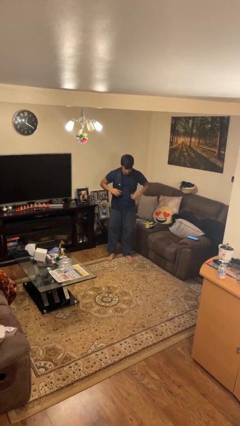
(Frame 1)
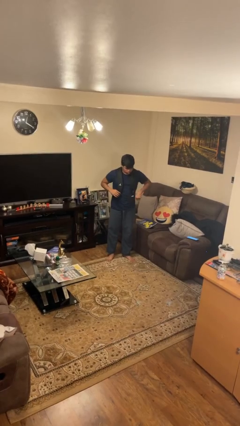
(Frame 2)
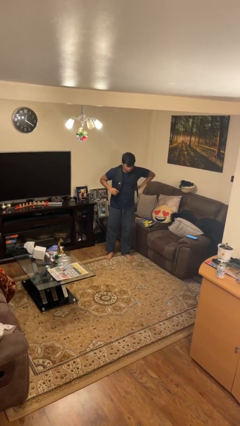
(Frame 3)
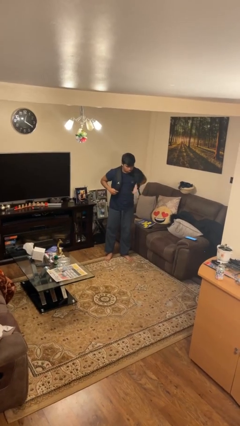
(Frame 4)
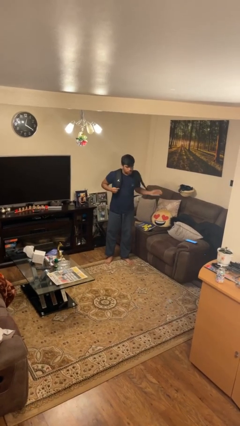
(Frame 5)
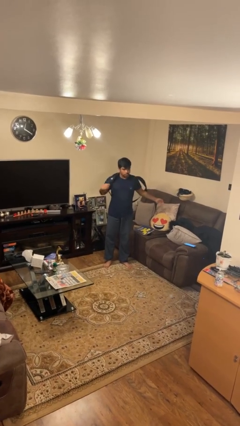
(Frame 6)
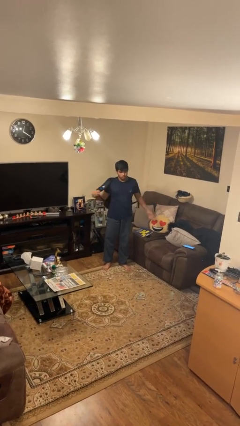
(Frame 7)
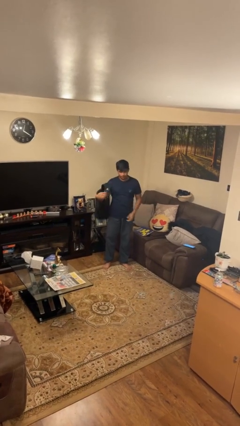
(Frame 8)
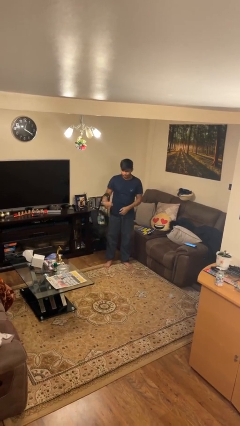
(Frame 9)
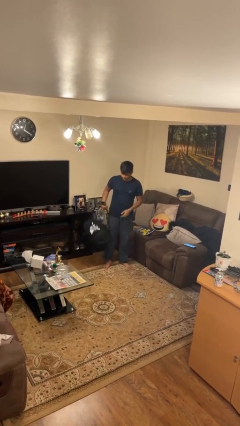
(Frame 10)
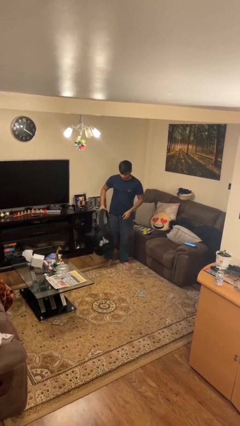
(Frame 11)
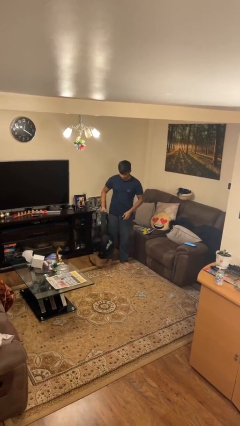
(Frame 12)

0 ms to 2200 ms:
person takes off backpack

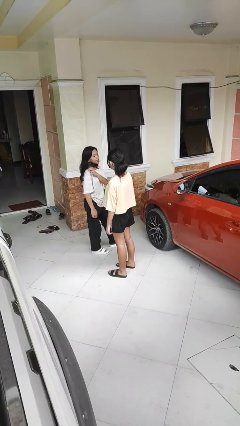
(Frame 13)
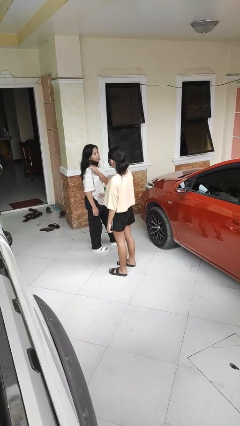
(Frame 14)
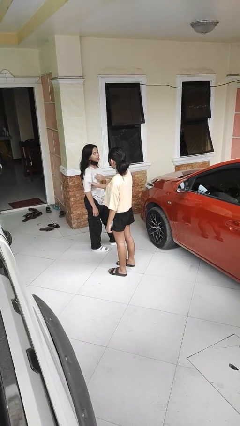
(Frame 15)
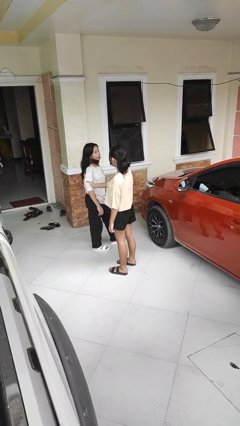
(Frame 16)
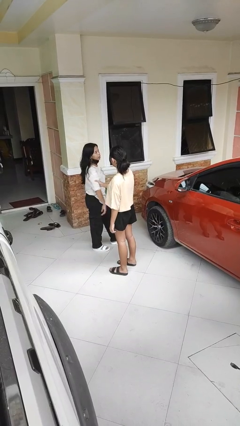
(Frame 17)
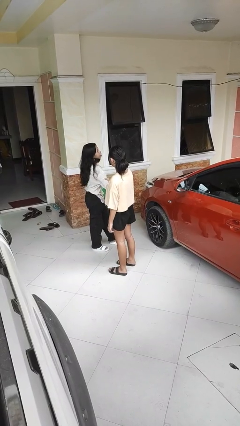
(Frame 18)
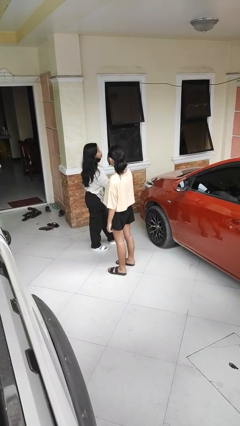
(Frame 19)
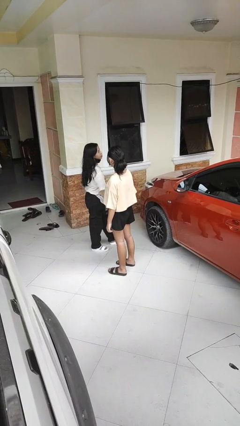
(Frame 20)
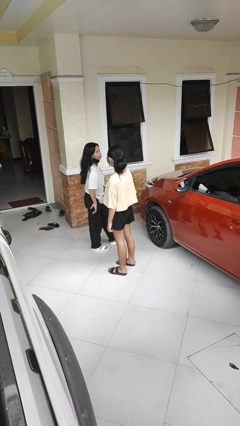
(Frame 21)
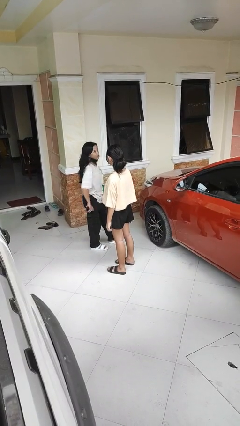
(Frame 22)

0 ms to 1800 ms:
person grabs person by bicep

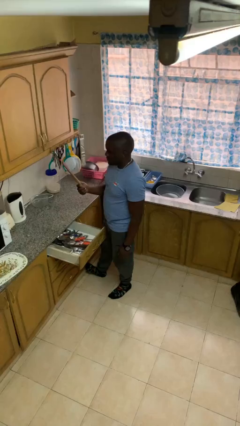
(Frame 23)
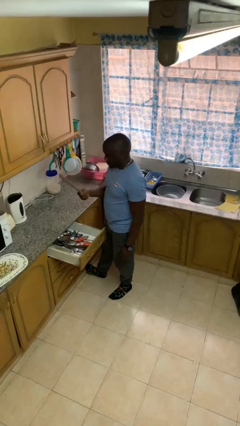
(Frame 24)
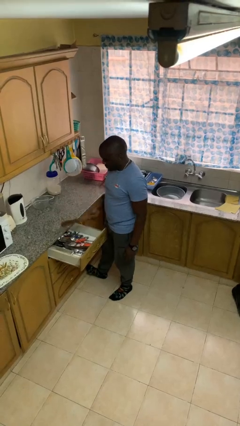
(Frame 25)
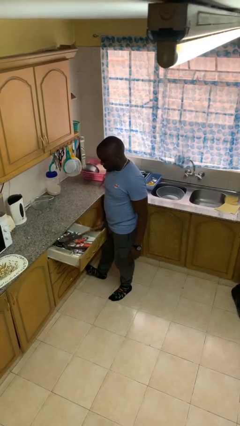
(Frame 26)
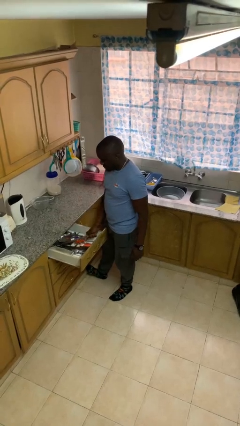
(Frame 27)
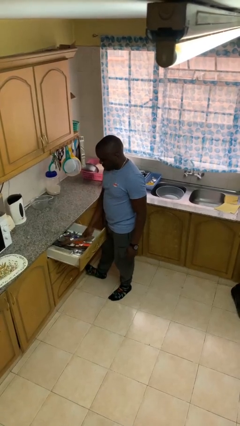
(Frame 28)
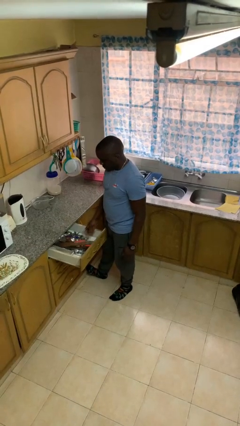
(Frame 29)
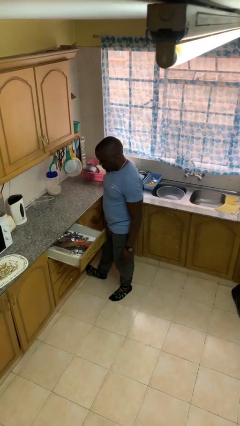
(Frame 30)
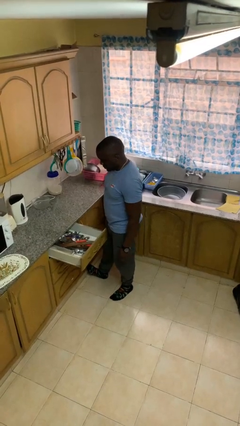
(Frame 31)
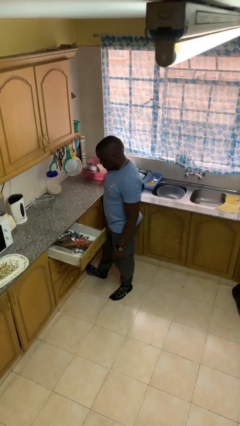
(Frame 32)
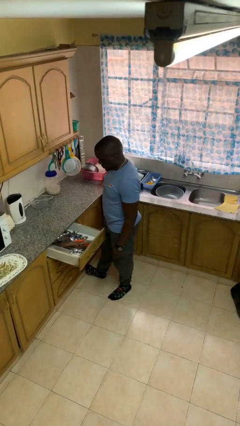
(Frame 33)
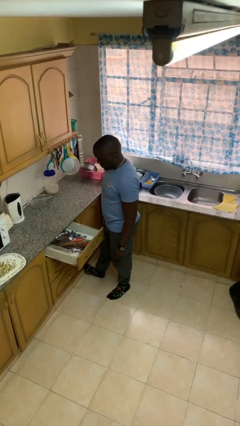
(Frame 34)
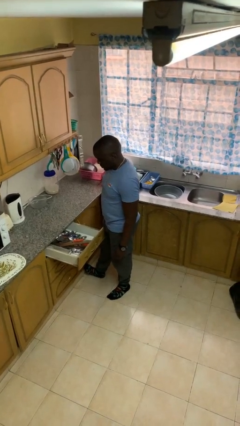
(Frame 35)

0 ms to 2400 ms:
person puts object into kitchen drawer

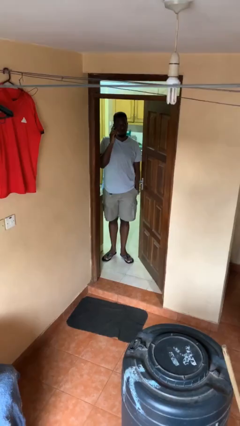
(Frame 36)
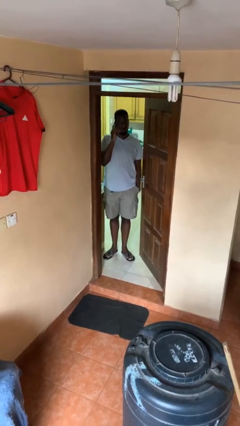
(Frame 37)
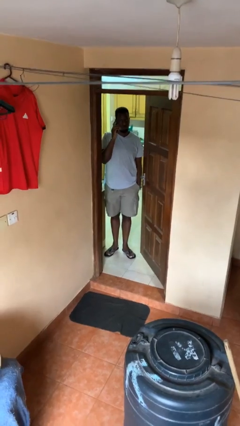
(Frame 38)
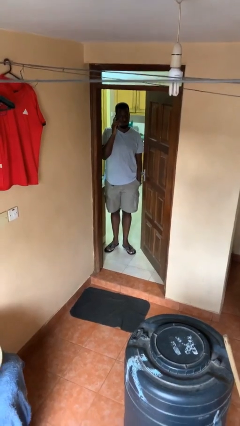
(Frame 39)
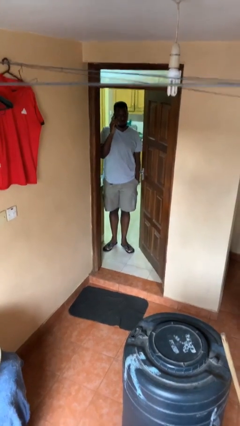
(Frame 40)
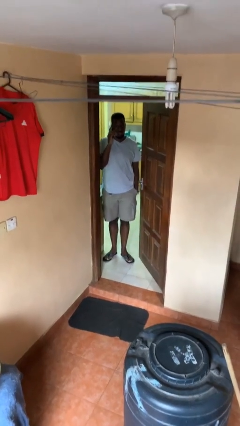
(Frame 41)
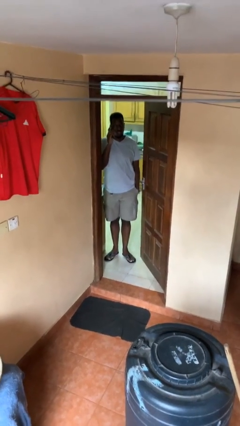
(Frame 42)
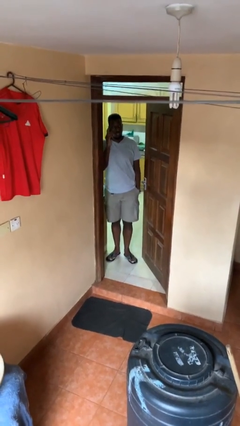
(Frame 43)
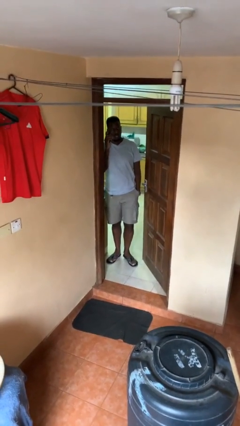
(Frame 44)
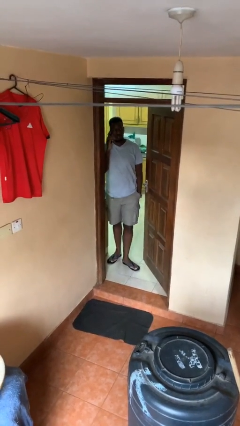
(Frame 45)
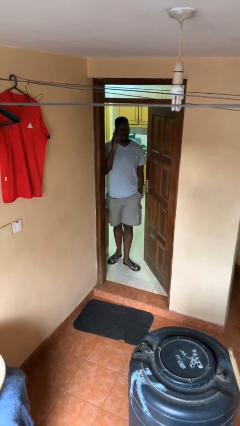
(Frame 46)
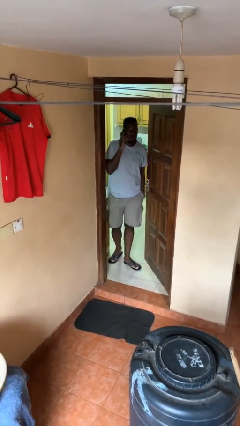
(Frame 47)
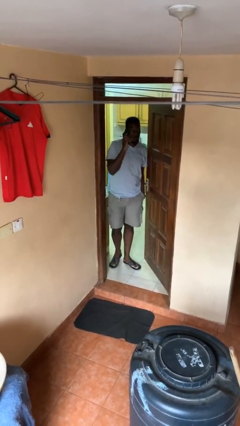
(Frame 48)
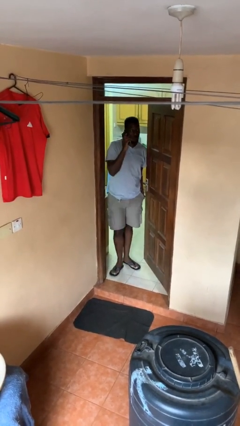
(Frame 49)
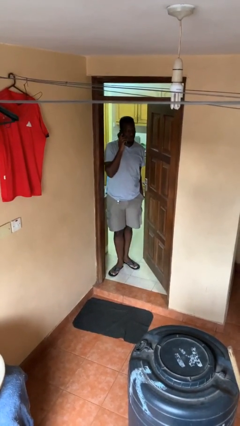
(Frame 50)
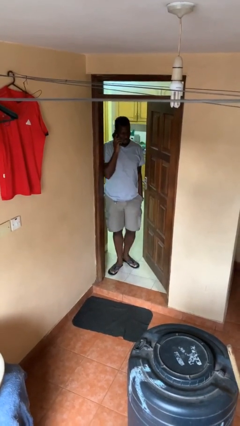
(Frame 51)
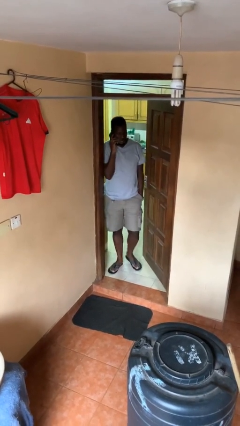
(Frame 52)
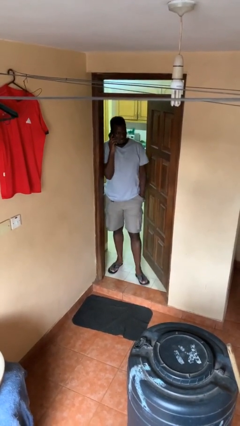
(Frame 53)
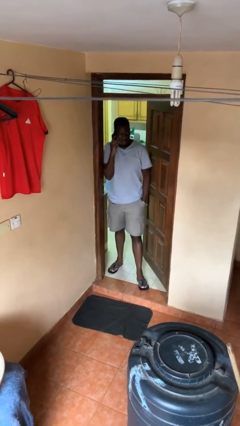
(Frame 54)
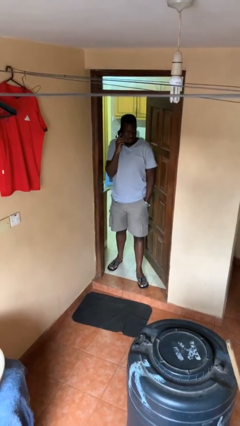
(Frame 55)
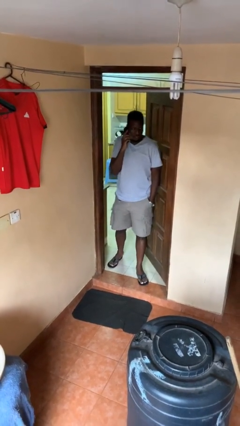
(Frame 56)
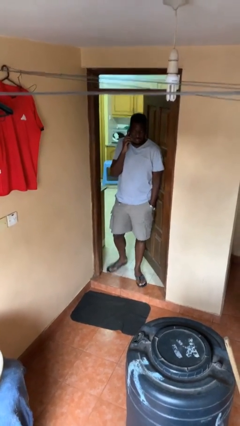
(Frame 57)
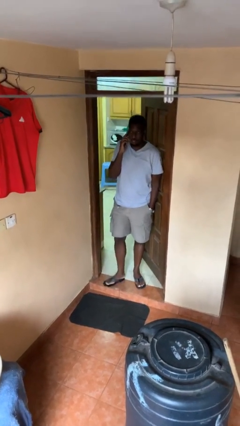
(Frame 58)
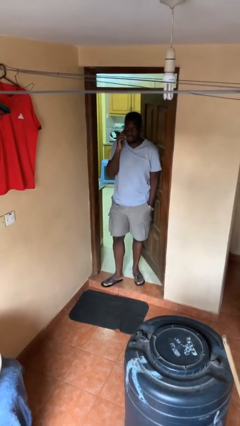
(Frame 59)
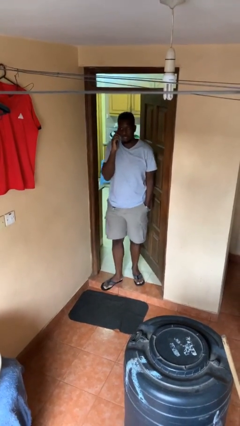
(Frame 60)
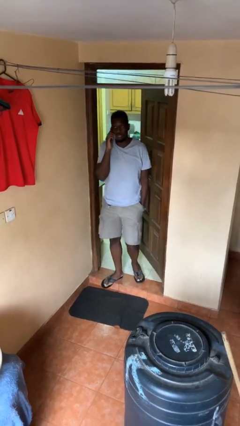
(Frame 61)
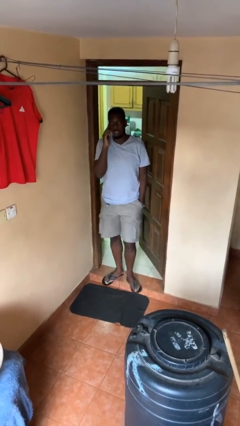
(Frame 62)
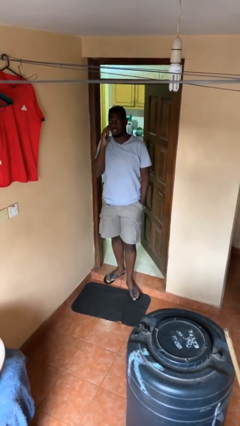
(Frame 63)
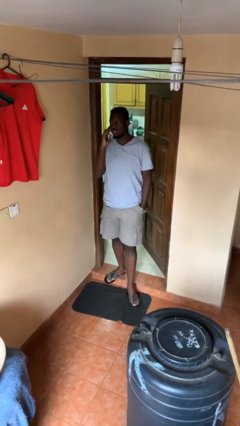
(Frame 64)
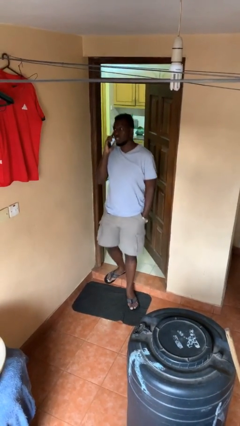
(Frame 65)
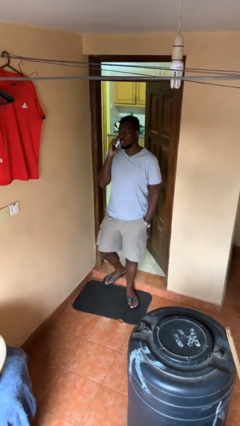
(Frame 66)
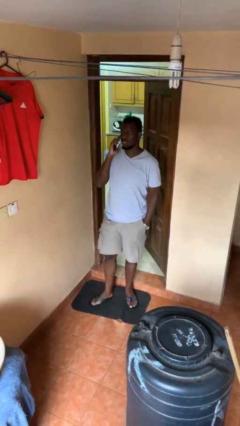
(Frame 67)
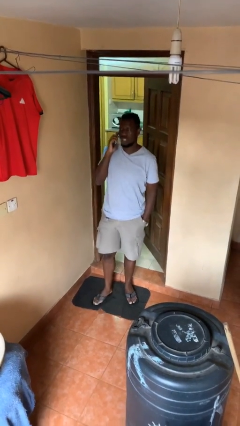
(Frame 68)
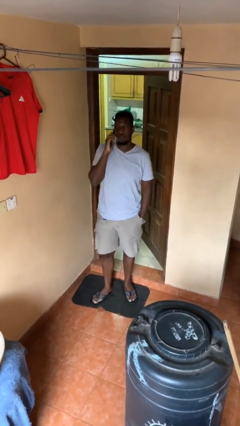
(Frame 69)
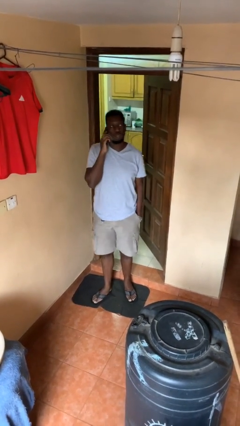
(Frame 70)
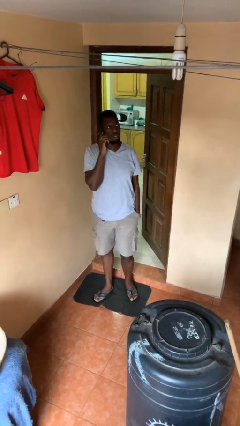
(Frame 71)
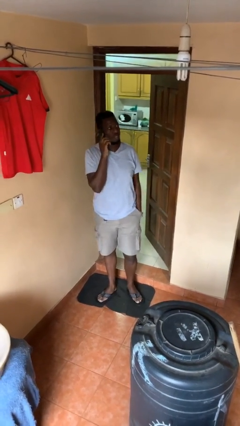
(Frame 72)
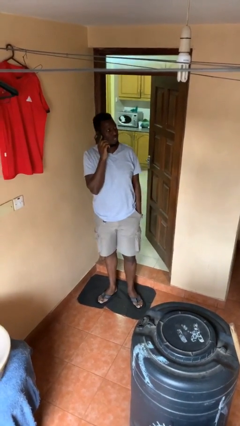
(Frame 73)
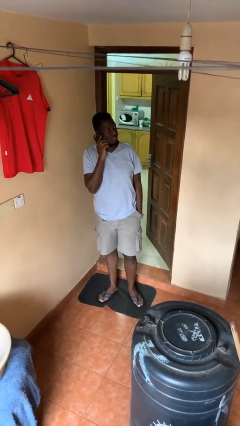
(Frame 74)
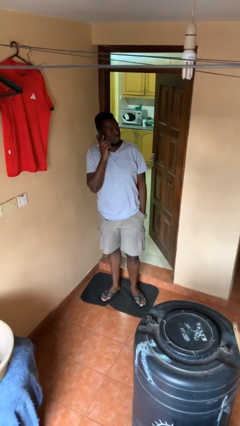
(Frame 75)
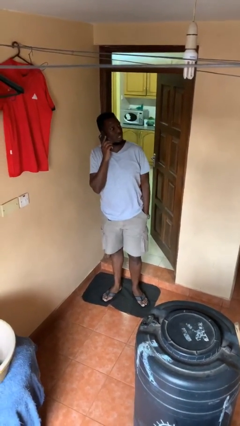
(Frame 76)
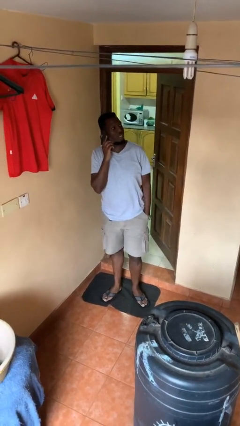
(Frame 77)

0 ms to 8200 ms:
person enters scene through structure

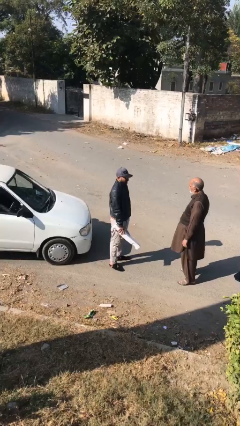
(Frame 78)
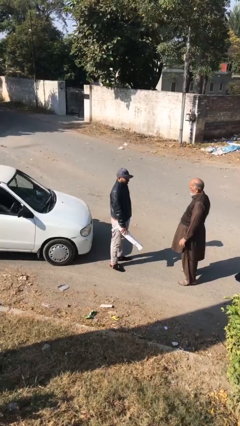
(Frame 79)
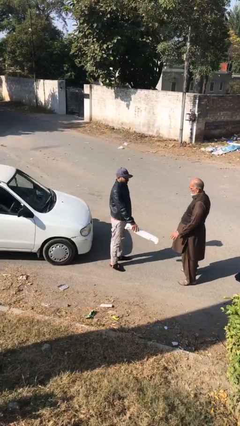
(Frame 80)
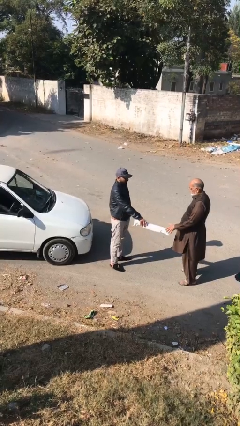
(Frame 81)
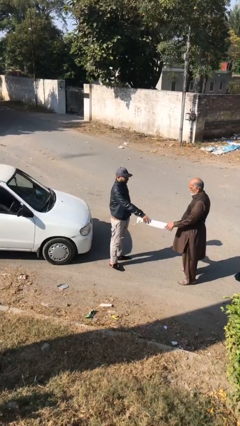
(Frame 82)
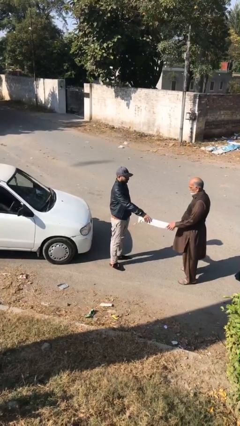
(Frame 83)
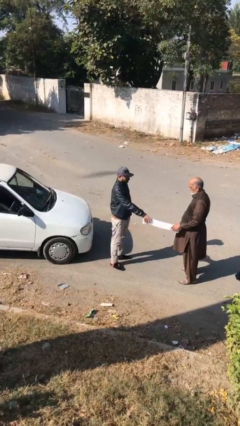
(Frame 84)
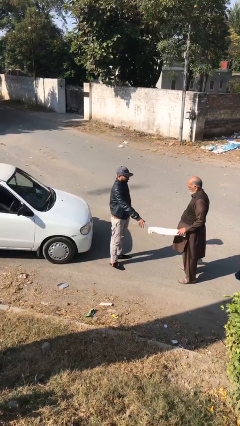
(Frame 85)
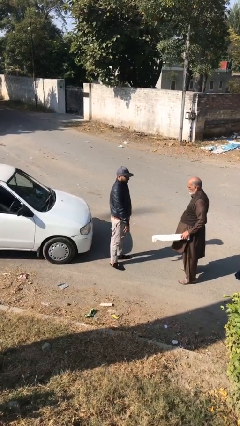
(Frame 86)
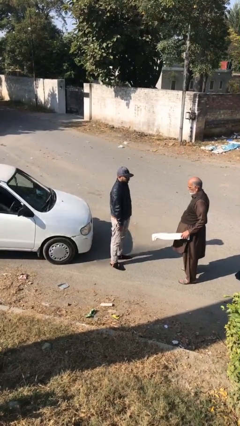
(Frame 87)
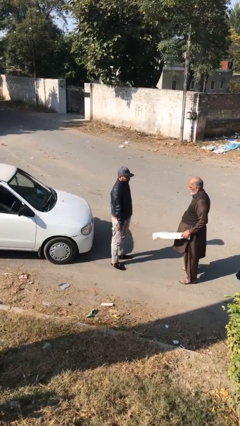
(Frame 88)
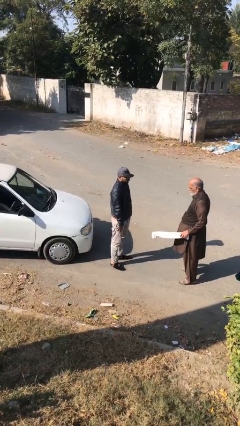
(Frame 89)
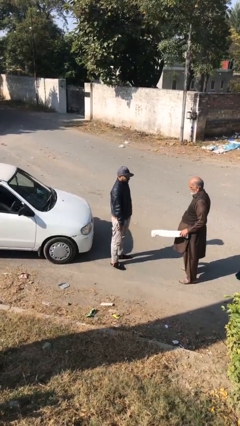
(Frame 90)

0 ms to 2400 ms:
person transfers object to person

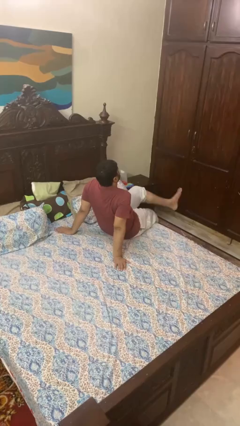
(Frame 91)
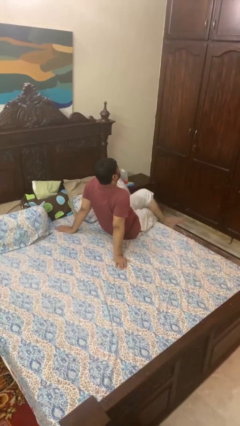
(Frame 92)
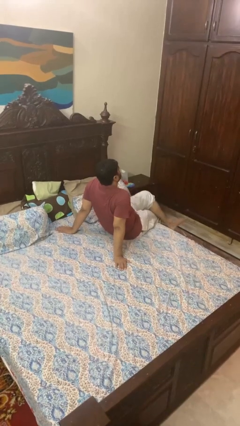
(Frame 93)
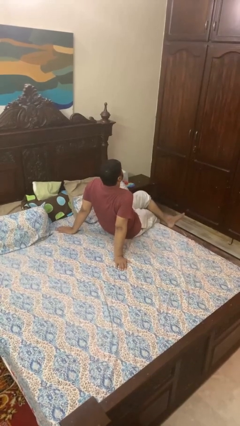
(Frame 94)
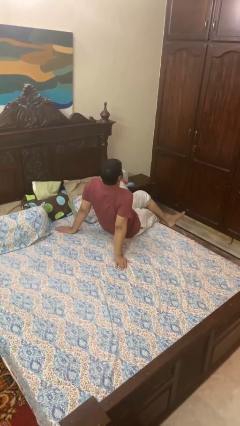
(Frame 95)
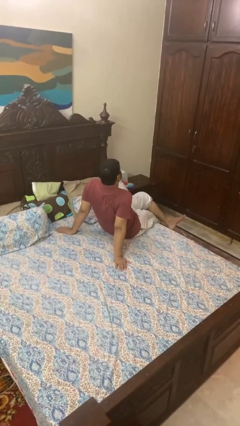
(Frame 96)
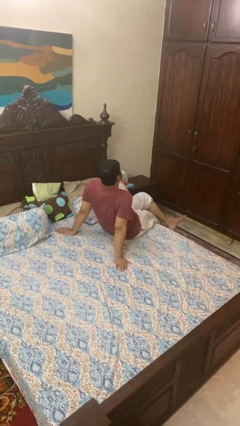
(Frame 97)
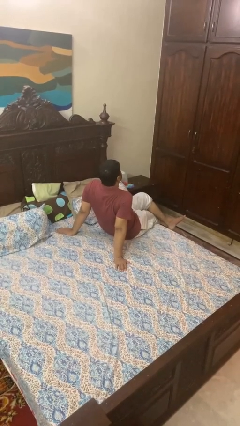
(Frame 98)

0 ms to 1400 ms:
person crosses legs
